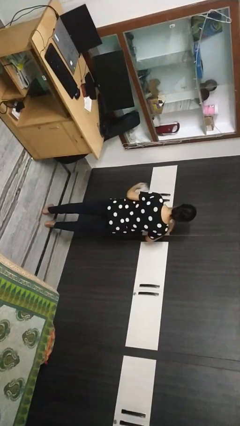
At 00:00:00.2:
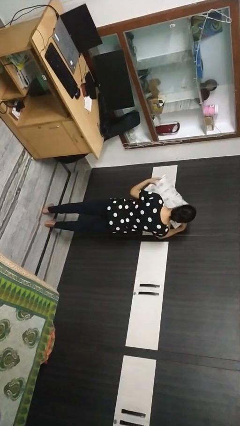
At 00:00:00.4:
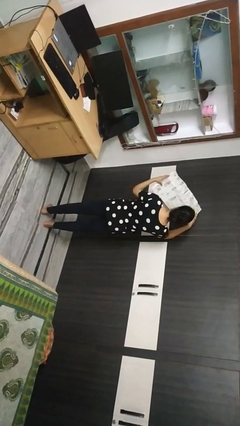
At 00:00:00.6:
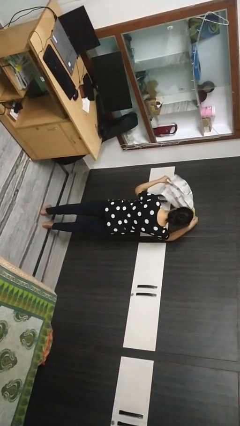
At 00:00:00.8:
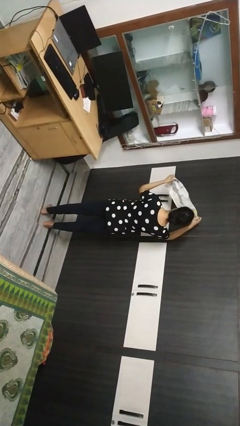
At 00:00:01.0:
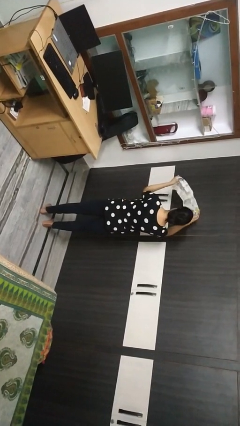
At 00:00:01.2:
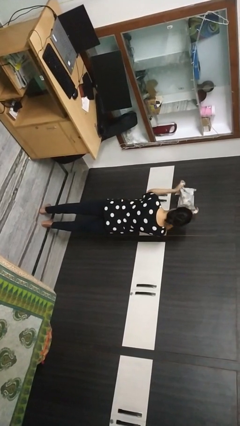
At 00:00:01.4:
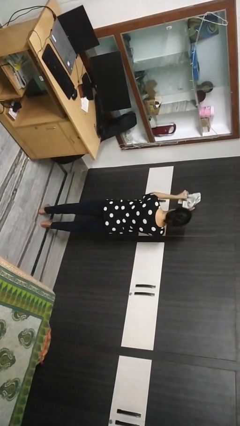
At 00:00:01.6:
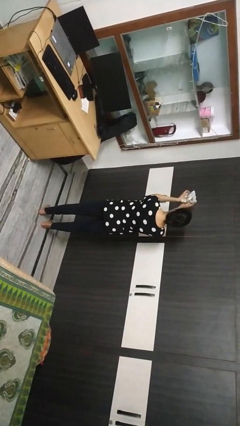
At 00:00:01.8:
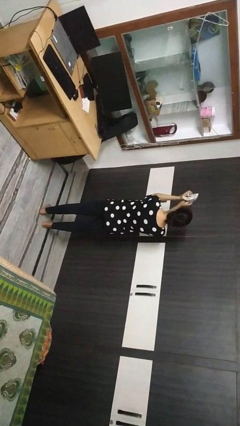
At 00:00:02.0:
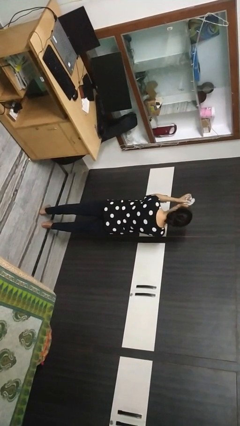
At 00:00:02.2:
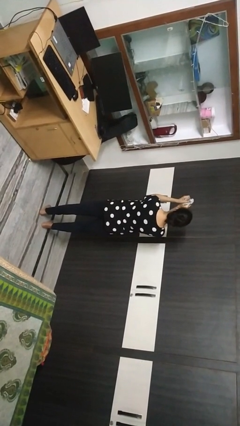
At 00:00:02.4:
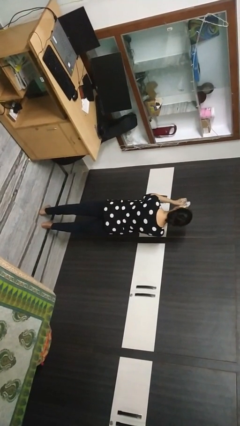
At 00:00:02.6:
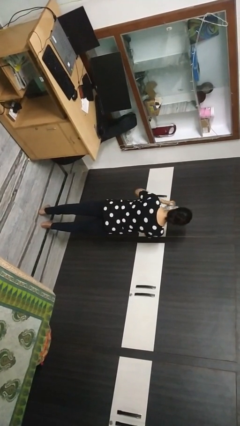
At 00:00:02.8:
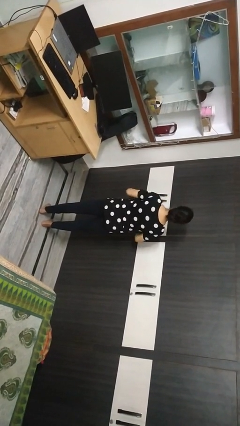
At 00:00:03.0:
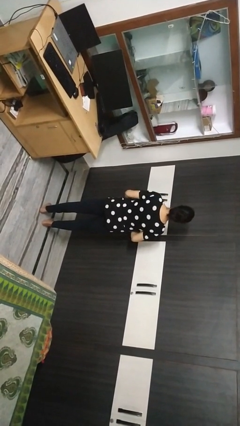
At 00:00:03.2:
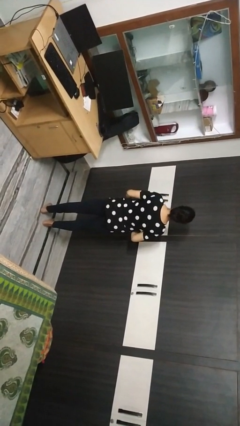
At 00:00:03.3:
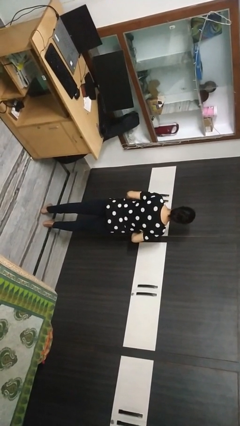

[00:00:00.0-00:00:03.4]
person crumples paper

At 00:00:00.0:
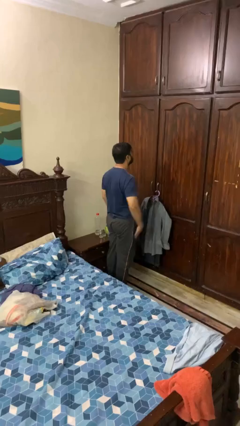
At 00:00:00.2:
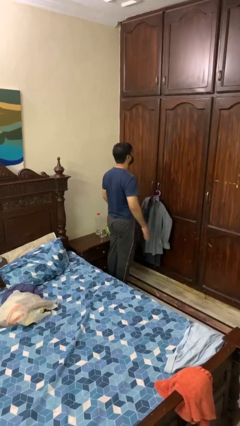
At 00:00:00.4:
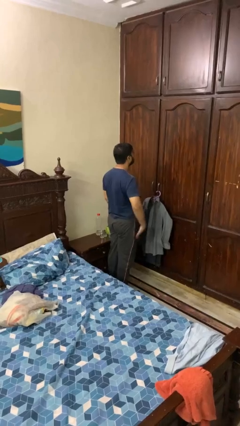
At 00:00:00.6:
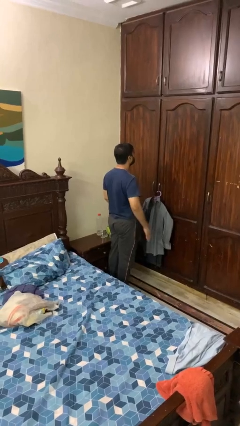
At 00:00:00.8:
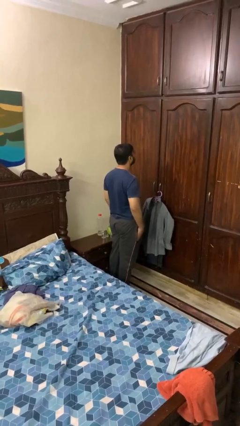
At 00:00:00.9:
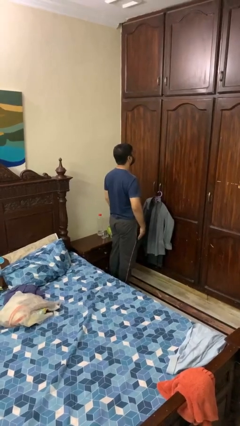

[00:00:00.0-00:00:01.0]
person slaps hands on thighs

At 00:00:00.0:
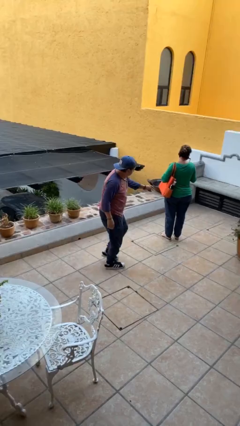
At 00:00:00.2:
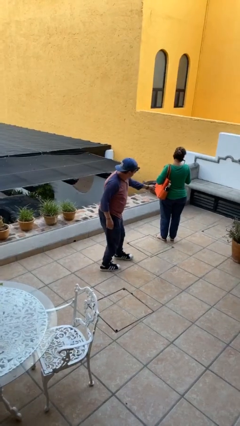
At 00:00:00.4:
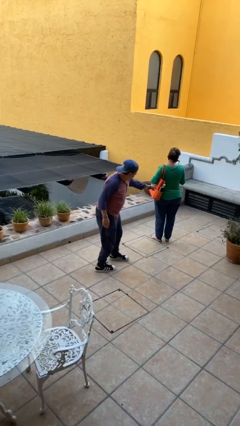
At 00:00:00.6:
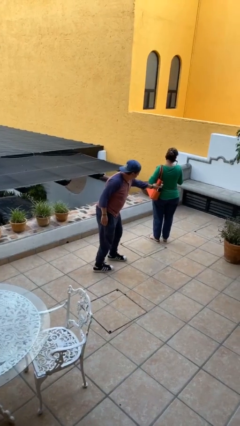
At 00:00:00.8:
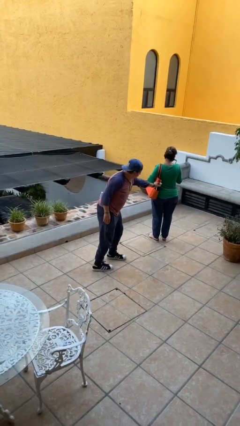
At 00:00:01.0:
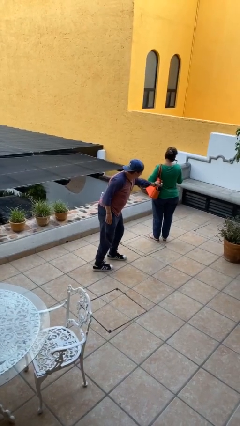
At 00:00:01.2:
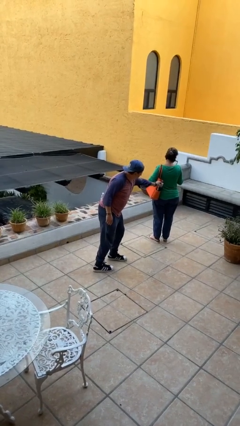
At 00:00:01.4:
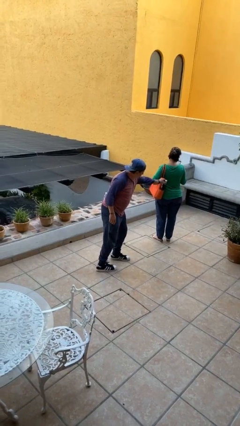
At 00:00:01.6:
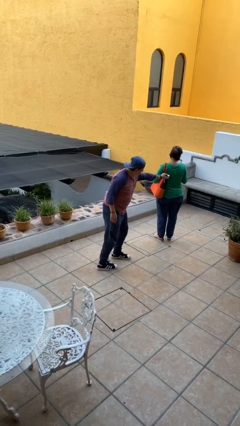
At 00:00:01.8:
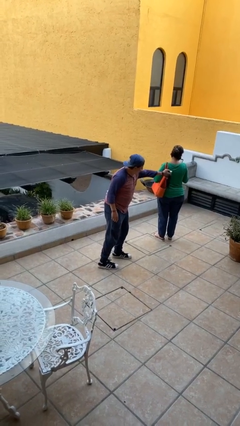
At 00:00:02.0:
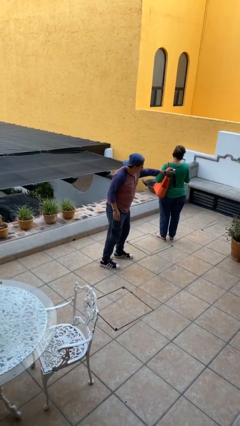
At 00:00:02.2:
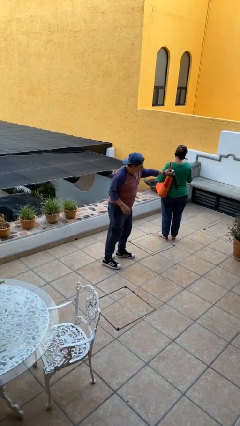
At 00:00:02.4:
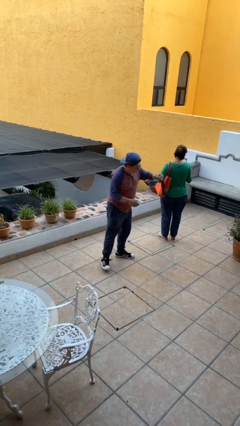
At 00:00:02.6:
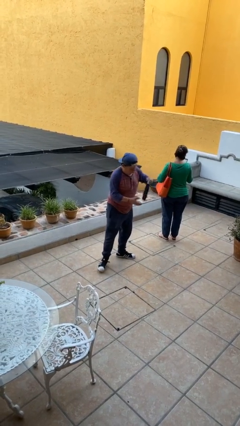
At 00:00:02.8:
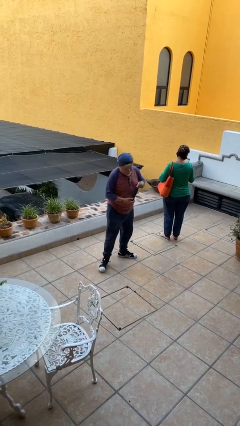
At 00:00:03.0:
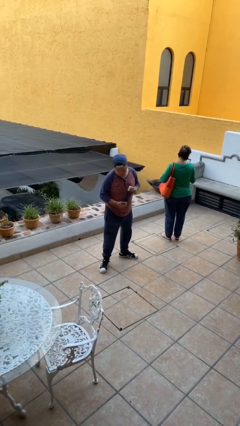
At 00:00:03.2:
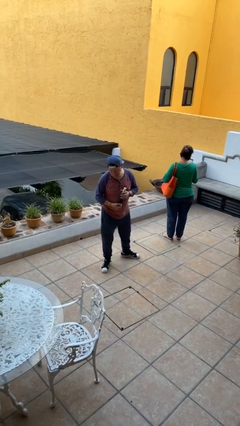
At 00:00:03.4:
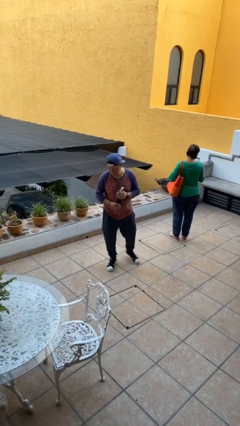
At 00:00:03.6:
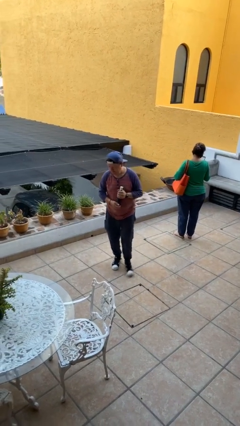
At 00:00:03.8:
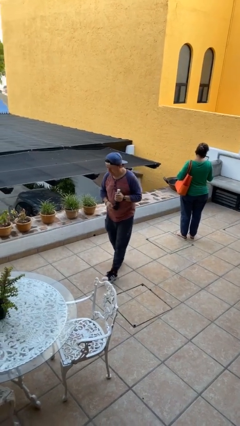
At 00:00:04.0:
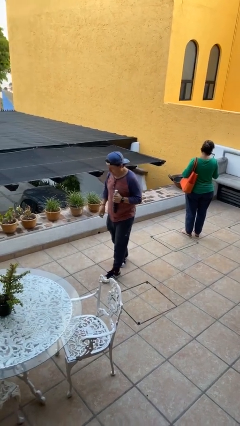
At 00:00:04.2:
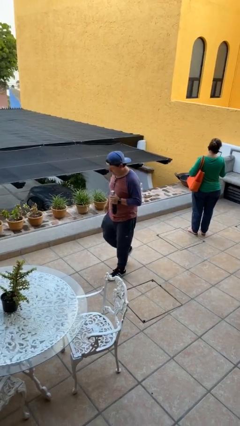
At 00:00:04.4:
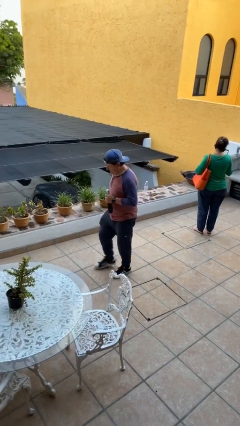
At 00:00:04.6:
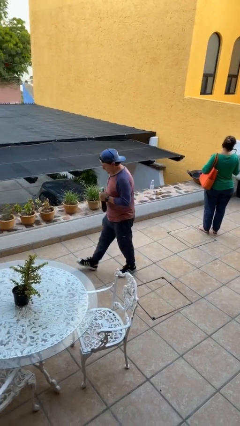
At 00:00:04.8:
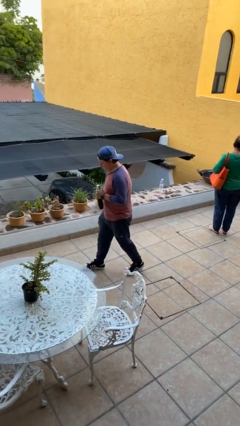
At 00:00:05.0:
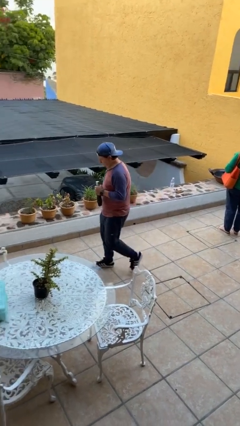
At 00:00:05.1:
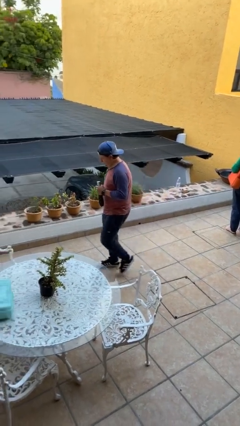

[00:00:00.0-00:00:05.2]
person steals object from person

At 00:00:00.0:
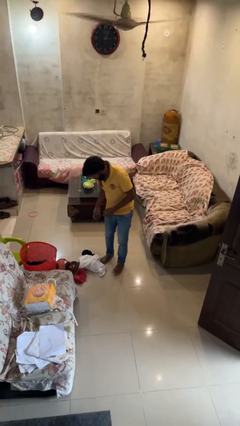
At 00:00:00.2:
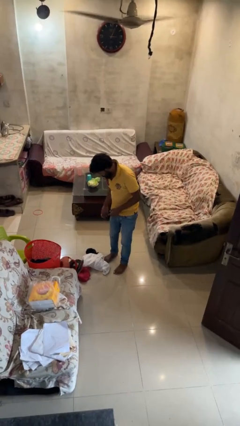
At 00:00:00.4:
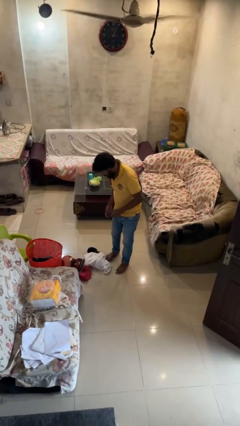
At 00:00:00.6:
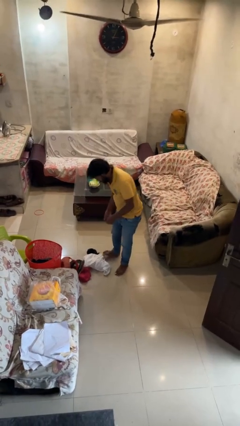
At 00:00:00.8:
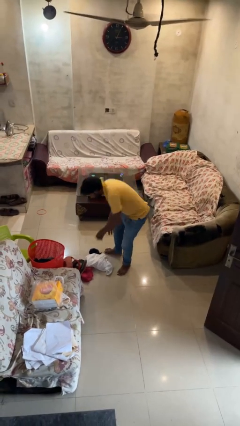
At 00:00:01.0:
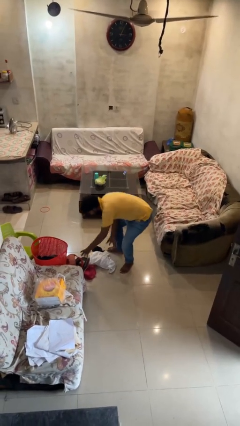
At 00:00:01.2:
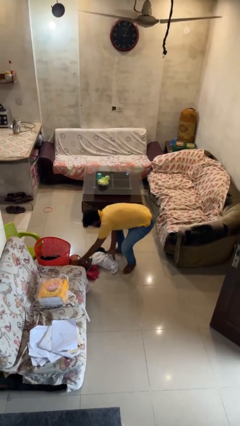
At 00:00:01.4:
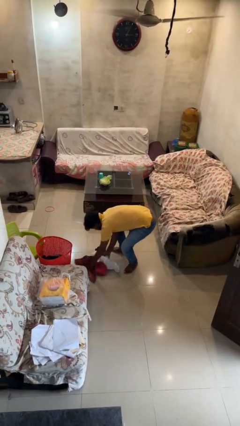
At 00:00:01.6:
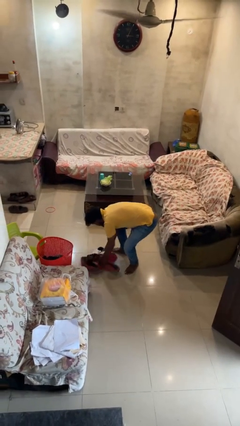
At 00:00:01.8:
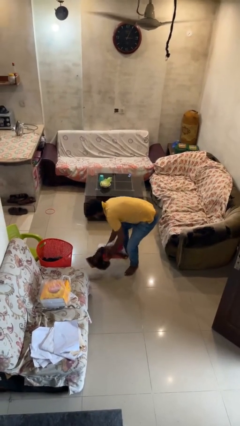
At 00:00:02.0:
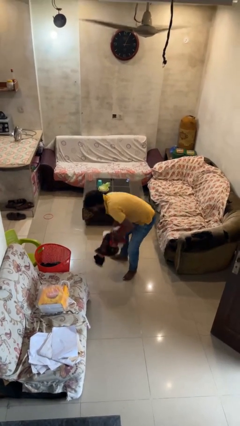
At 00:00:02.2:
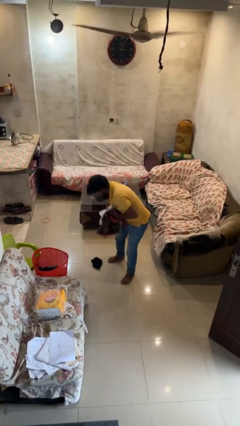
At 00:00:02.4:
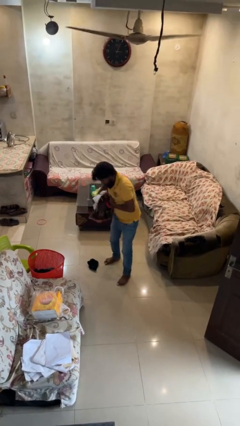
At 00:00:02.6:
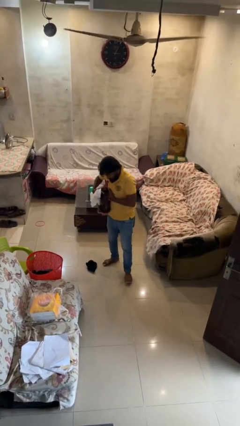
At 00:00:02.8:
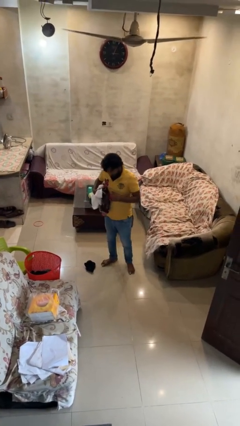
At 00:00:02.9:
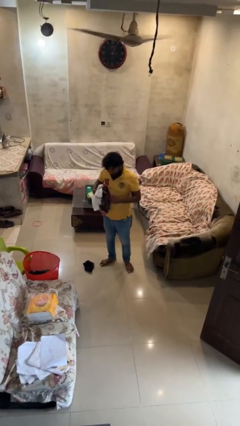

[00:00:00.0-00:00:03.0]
person picks up object from floor

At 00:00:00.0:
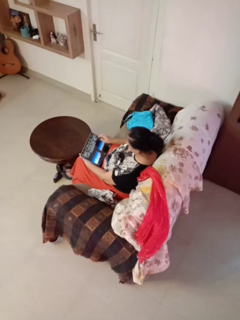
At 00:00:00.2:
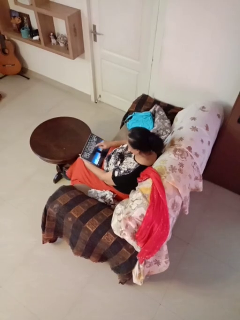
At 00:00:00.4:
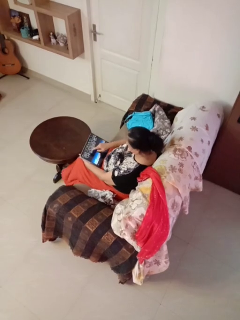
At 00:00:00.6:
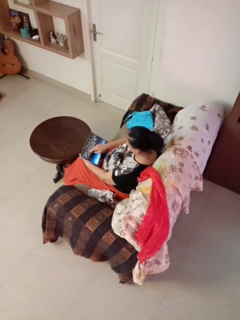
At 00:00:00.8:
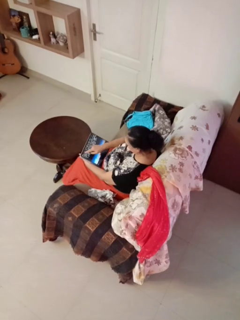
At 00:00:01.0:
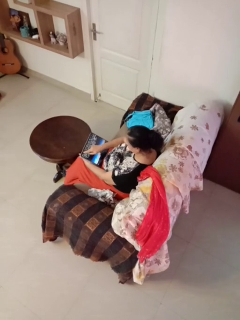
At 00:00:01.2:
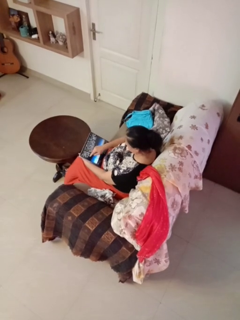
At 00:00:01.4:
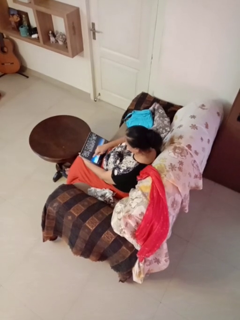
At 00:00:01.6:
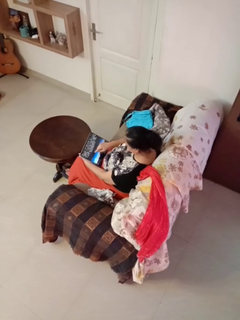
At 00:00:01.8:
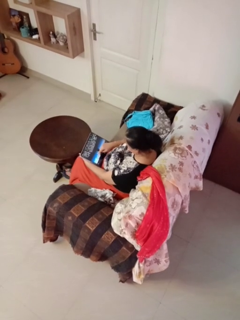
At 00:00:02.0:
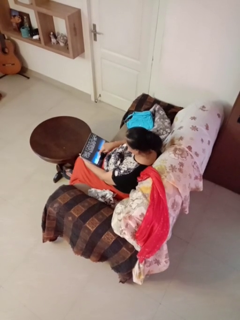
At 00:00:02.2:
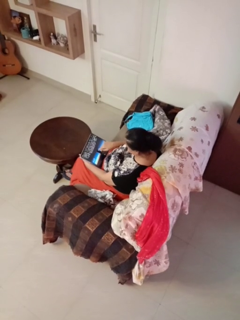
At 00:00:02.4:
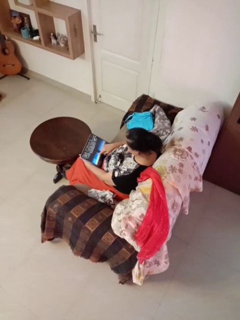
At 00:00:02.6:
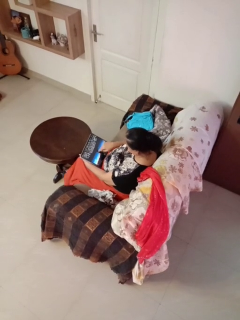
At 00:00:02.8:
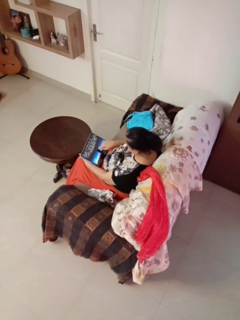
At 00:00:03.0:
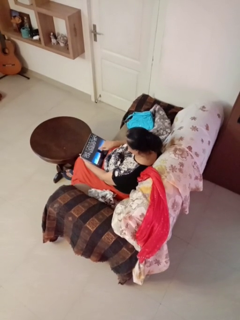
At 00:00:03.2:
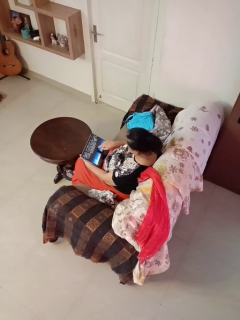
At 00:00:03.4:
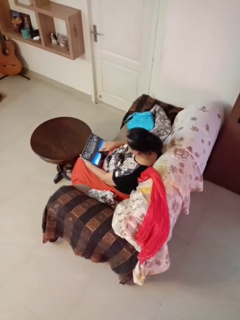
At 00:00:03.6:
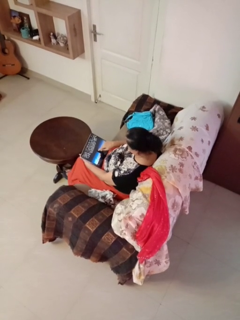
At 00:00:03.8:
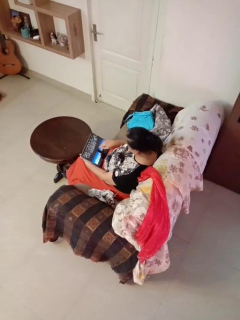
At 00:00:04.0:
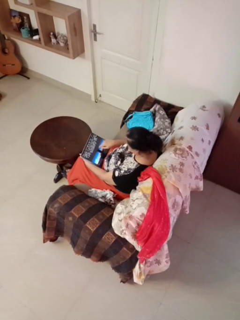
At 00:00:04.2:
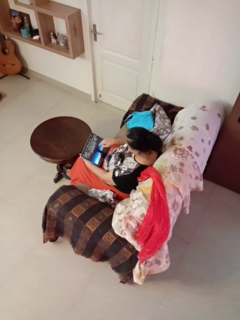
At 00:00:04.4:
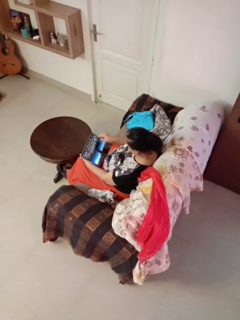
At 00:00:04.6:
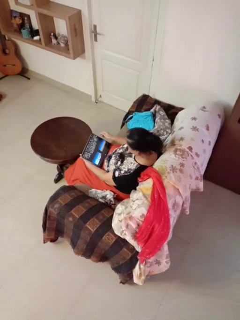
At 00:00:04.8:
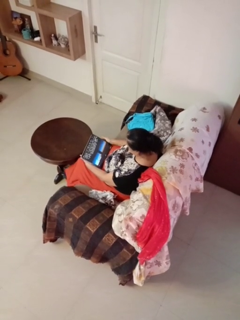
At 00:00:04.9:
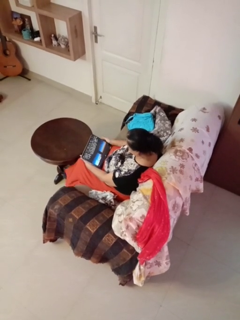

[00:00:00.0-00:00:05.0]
person interacts with tablet

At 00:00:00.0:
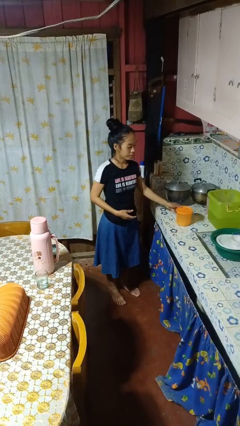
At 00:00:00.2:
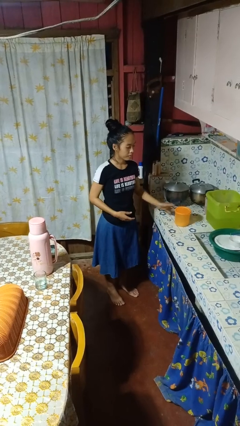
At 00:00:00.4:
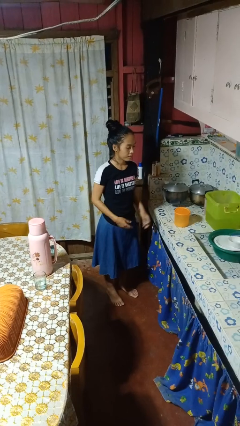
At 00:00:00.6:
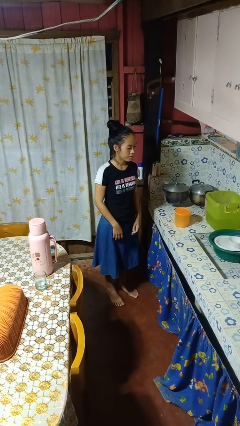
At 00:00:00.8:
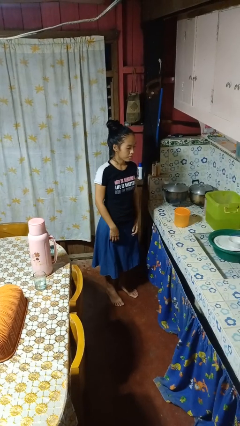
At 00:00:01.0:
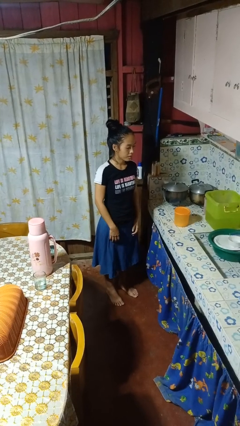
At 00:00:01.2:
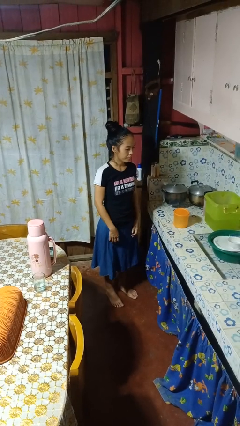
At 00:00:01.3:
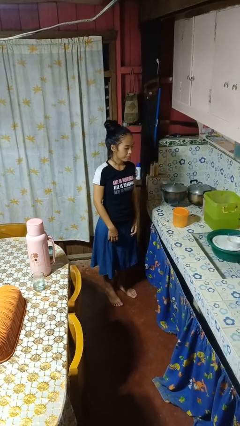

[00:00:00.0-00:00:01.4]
person puts down object on countertop
